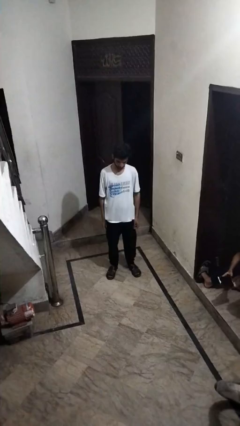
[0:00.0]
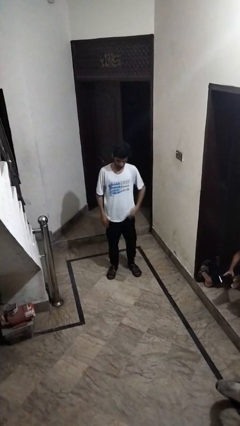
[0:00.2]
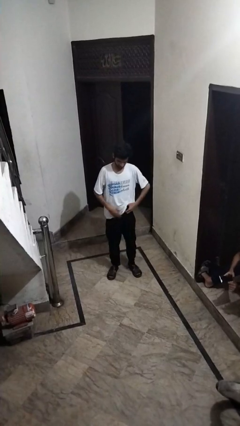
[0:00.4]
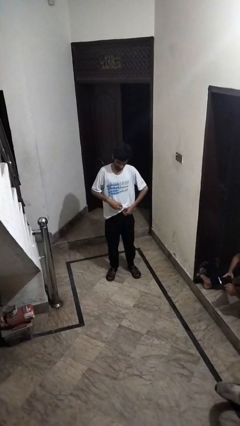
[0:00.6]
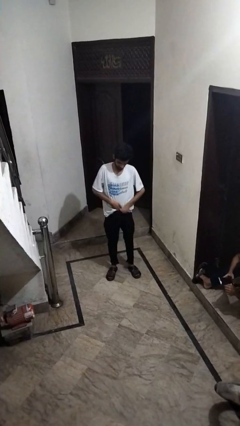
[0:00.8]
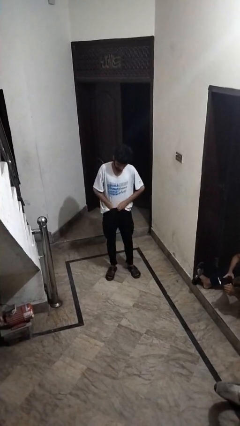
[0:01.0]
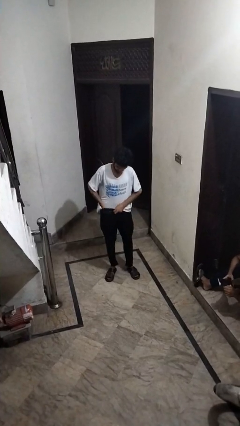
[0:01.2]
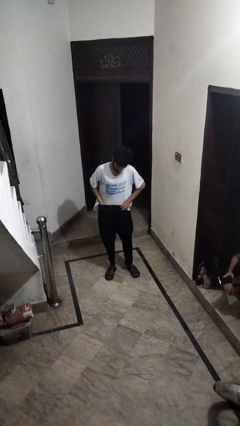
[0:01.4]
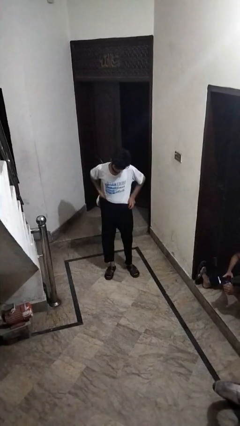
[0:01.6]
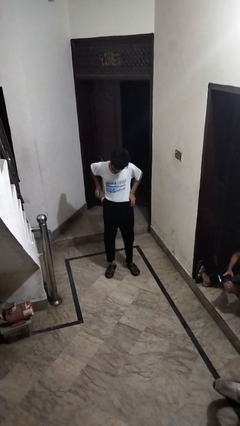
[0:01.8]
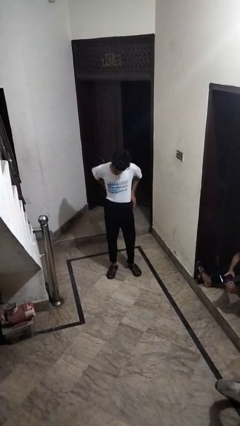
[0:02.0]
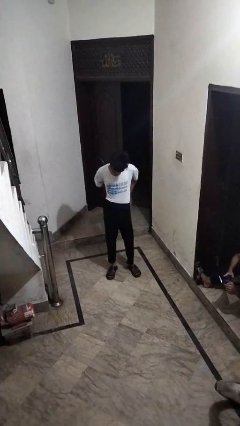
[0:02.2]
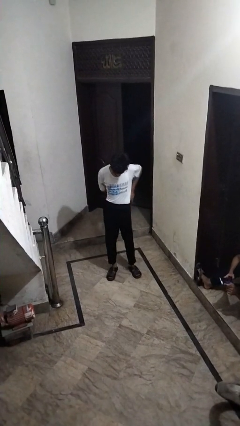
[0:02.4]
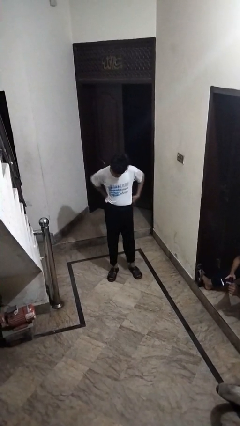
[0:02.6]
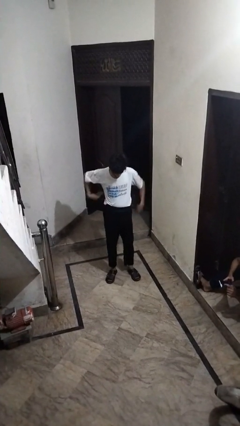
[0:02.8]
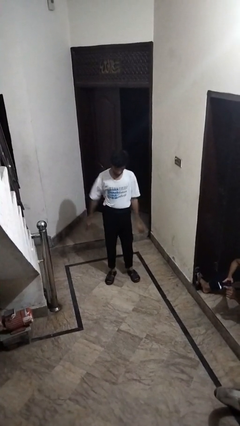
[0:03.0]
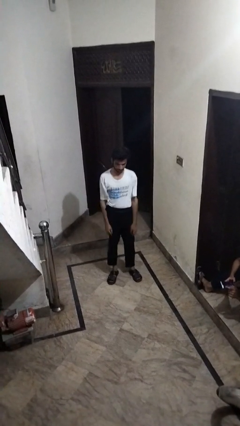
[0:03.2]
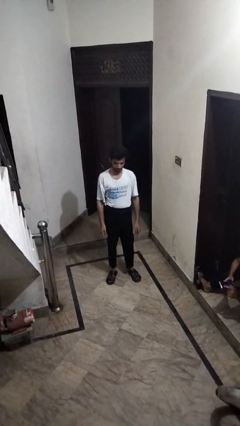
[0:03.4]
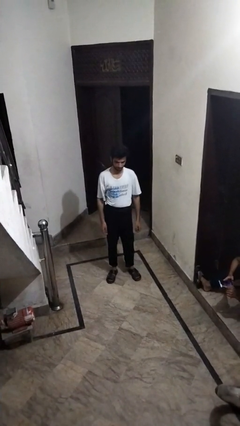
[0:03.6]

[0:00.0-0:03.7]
person tucks in shirt

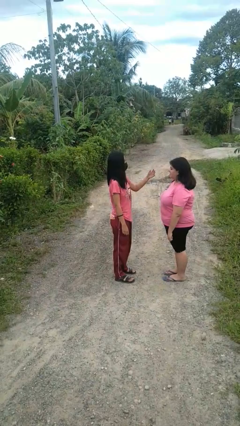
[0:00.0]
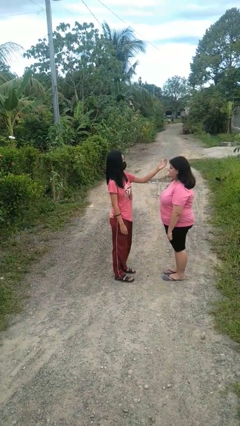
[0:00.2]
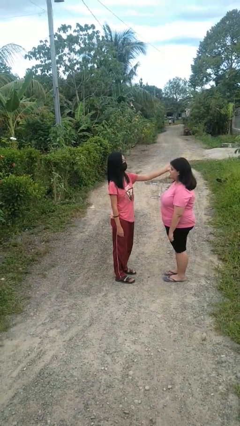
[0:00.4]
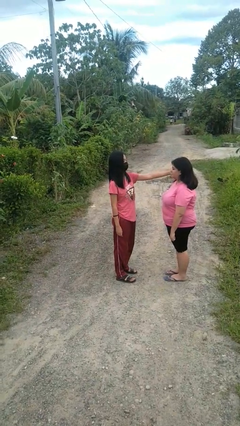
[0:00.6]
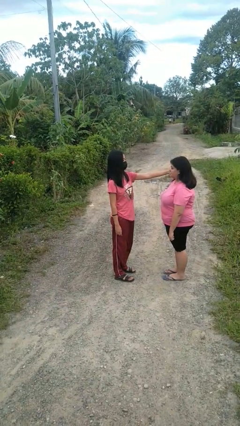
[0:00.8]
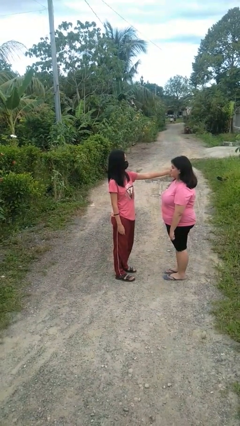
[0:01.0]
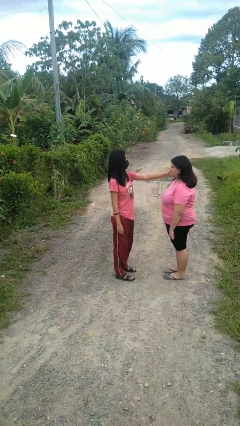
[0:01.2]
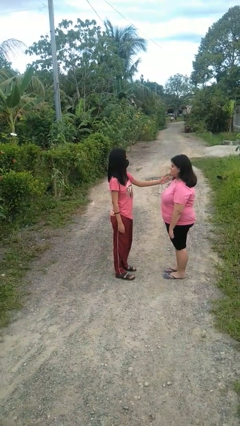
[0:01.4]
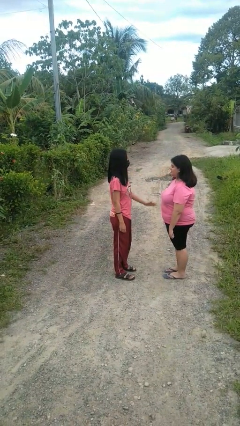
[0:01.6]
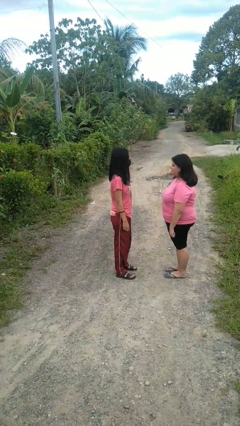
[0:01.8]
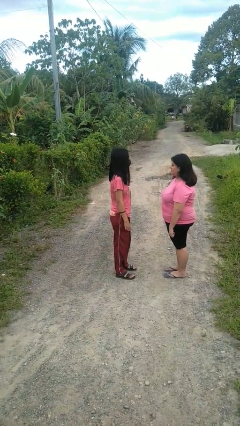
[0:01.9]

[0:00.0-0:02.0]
person touches face of person

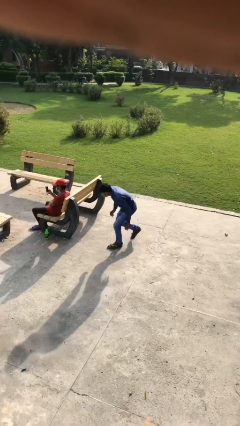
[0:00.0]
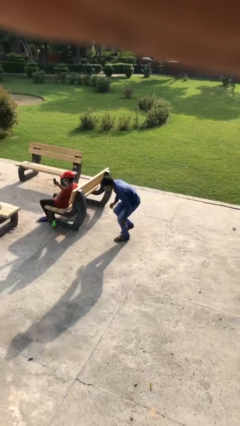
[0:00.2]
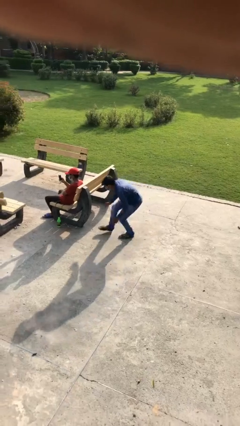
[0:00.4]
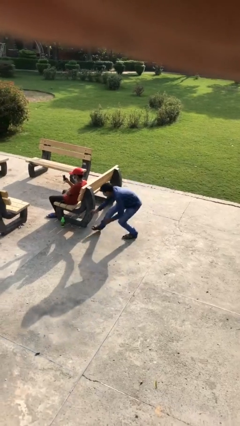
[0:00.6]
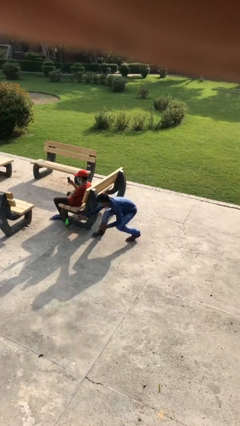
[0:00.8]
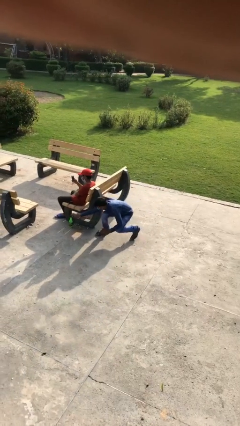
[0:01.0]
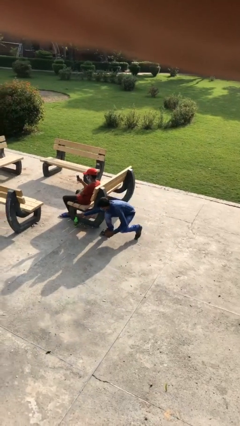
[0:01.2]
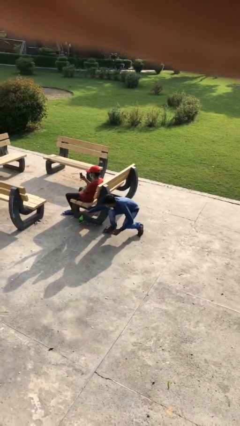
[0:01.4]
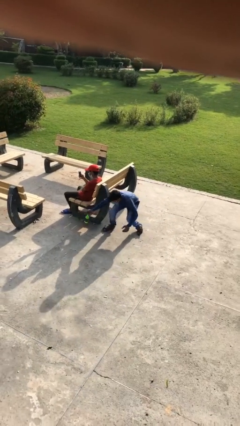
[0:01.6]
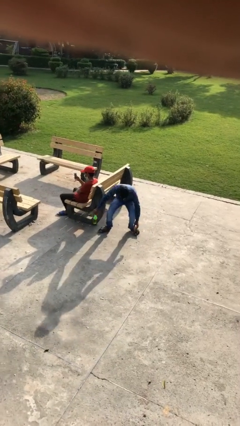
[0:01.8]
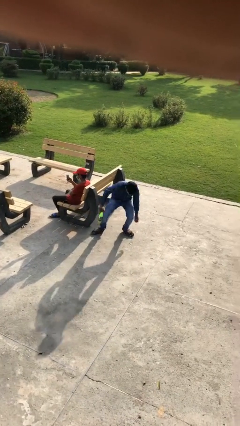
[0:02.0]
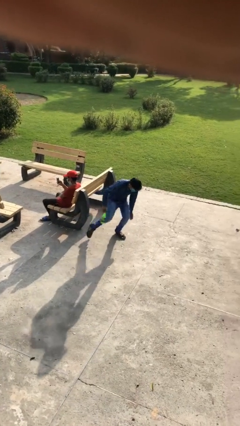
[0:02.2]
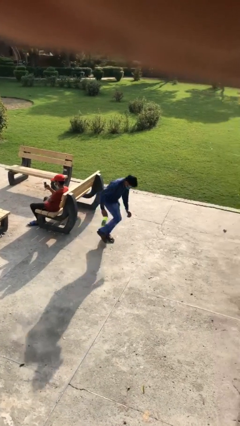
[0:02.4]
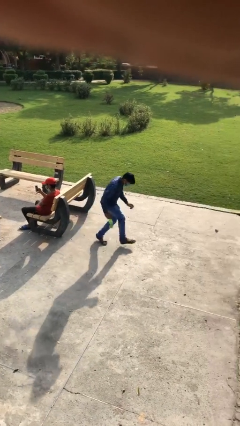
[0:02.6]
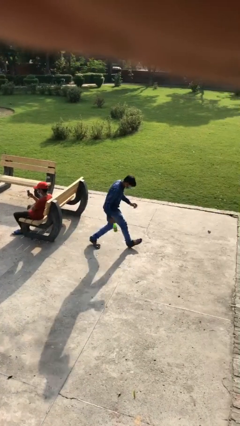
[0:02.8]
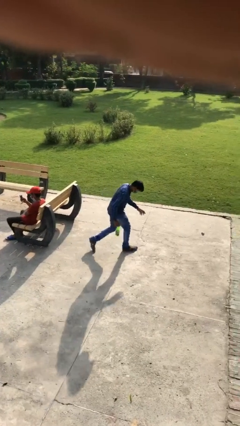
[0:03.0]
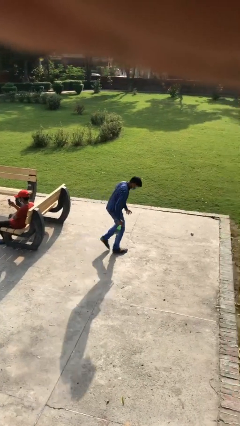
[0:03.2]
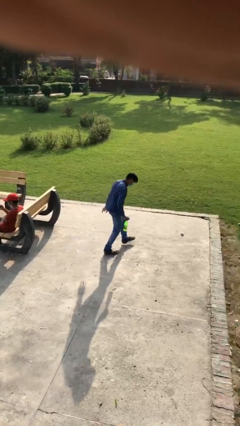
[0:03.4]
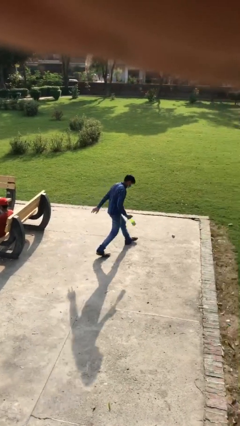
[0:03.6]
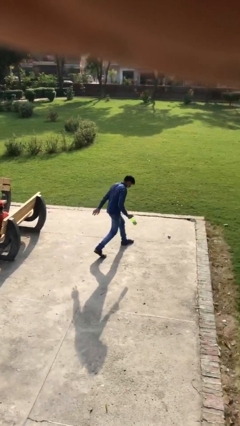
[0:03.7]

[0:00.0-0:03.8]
person steals object from person

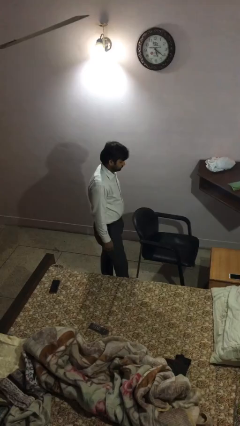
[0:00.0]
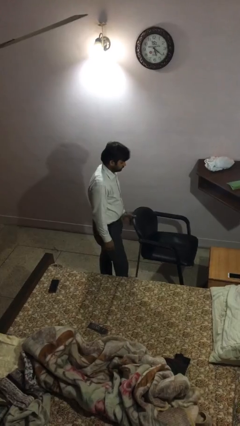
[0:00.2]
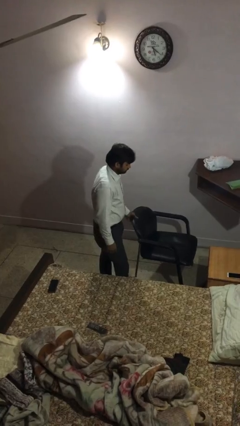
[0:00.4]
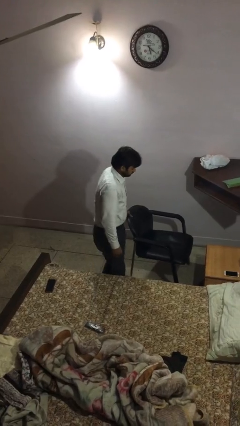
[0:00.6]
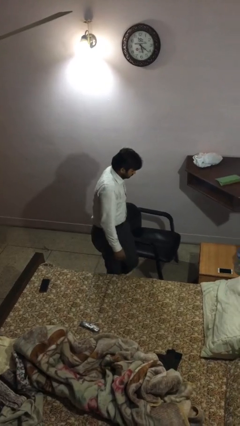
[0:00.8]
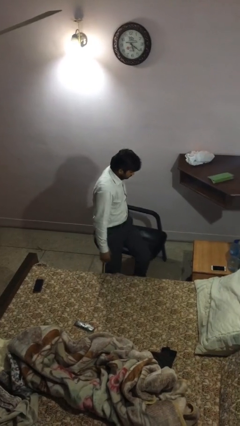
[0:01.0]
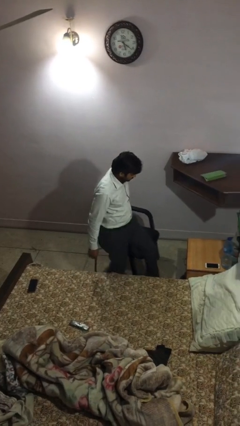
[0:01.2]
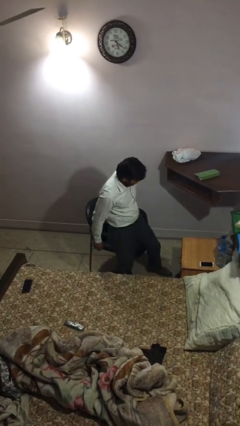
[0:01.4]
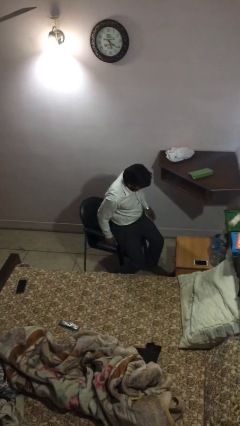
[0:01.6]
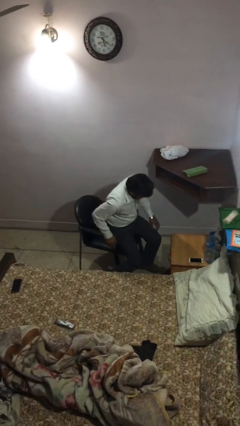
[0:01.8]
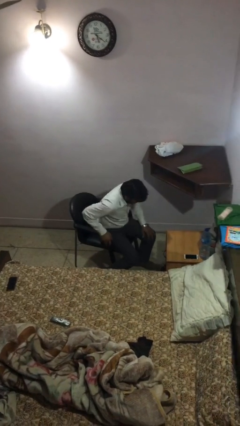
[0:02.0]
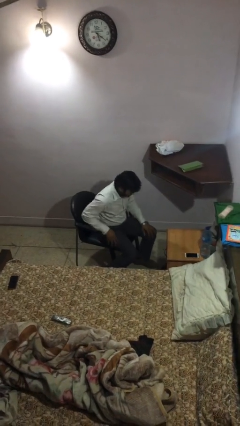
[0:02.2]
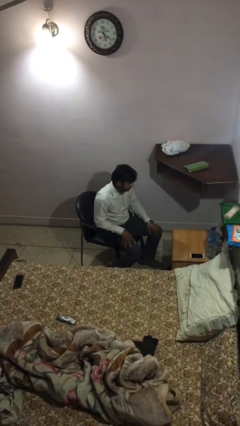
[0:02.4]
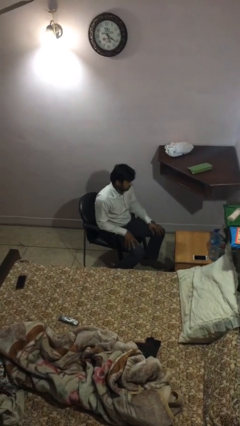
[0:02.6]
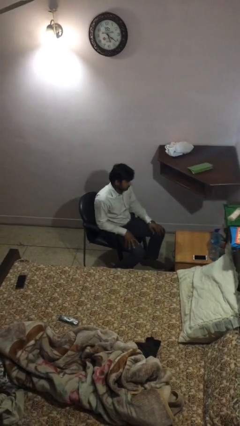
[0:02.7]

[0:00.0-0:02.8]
person sits down

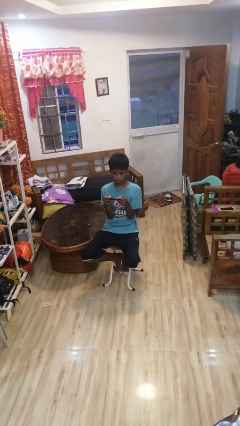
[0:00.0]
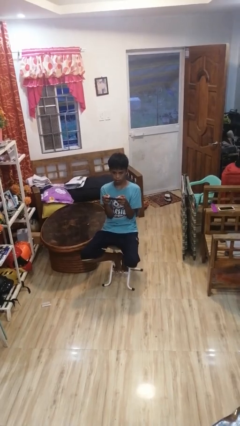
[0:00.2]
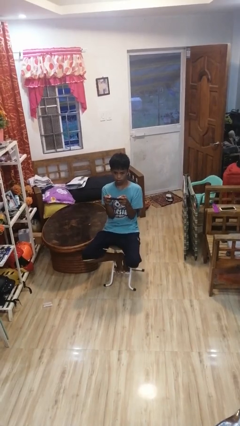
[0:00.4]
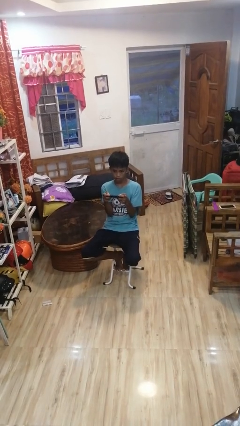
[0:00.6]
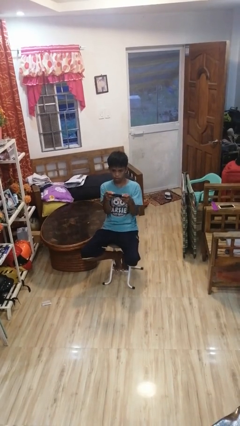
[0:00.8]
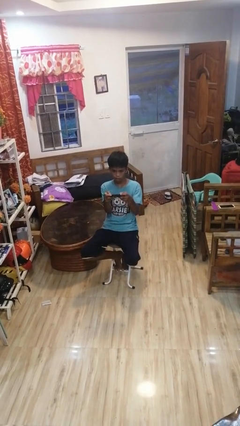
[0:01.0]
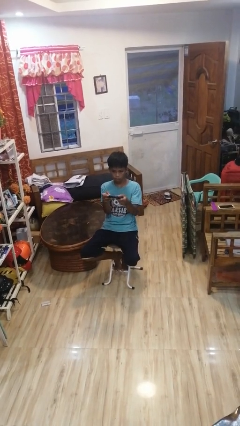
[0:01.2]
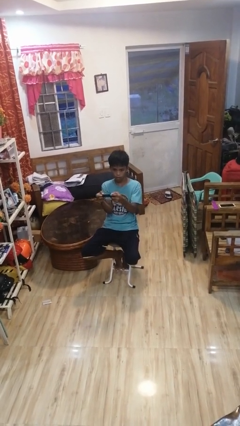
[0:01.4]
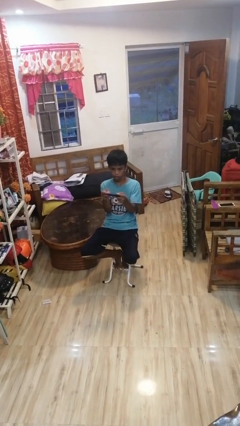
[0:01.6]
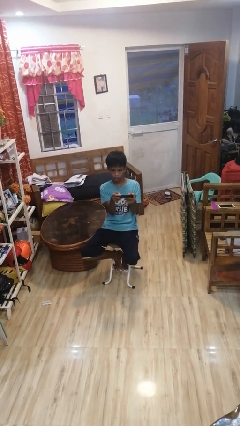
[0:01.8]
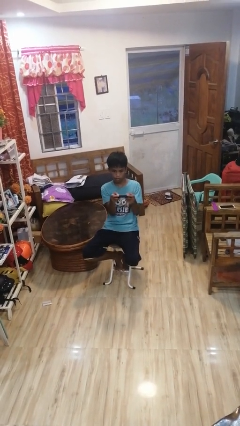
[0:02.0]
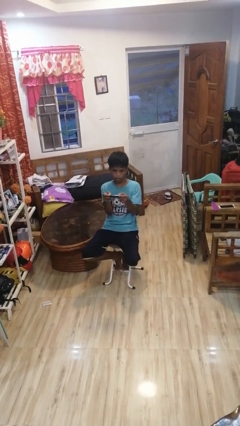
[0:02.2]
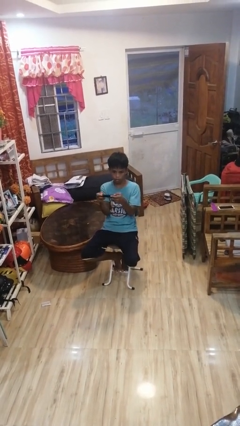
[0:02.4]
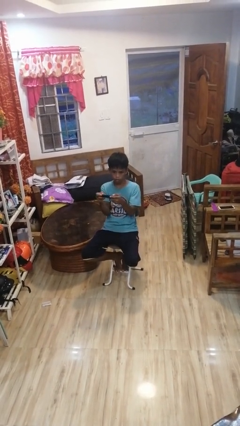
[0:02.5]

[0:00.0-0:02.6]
person interacts with handheld game

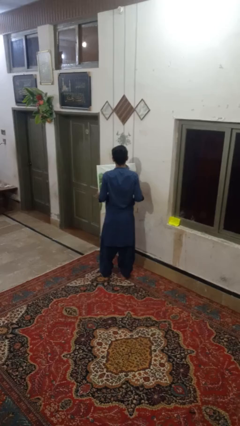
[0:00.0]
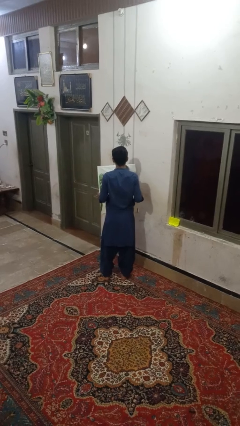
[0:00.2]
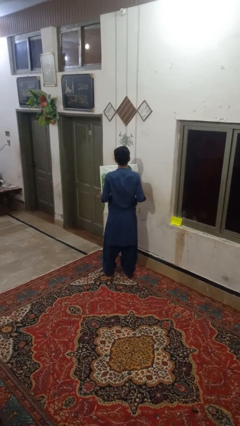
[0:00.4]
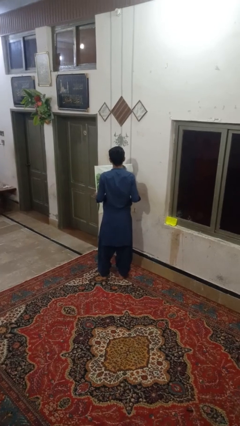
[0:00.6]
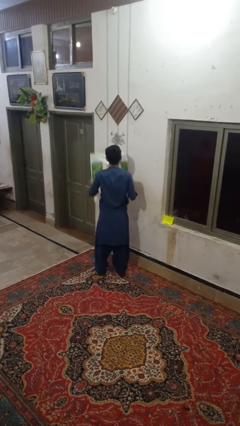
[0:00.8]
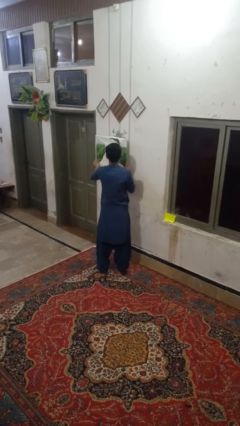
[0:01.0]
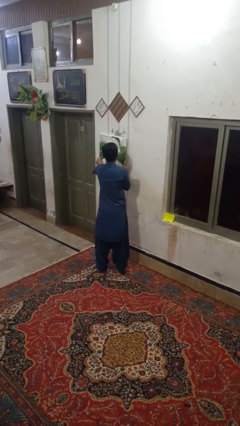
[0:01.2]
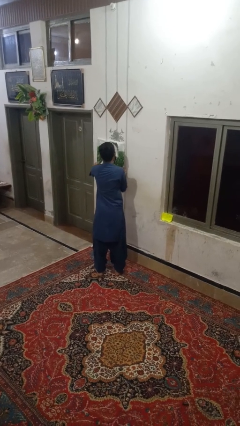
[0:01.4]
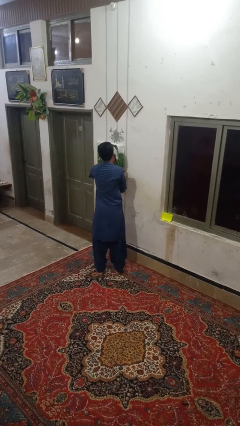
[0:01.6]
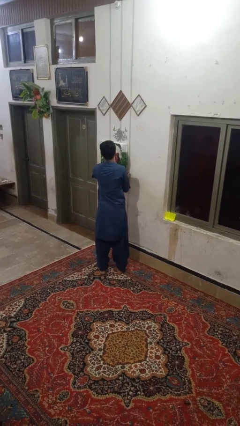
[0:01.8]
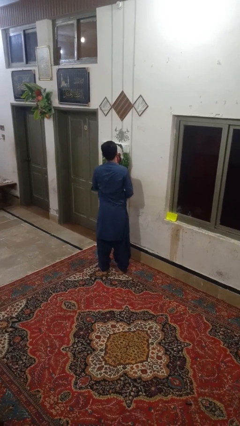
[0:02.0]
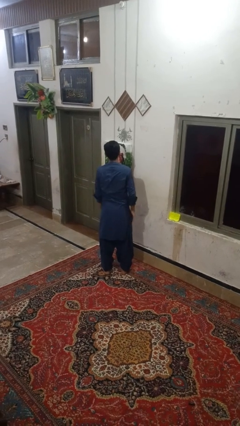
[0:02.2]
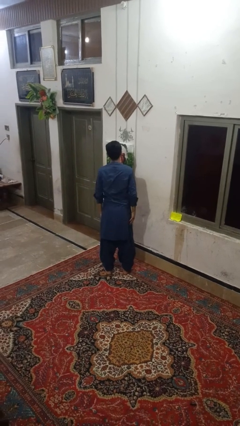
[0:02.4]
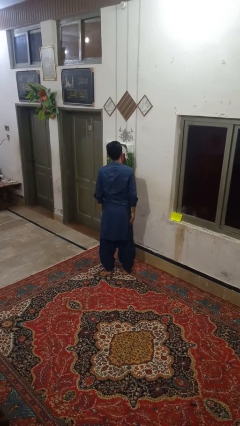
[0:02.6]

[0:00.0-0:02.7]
person puts up picture frame

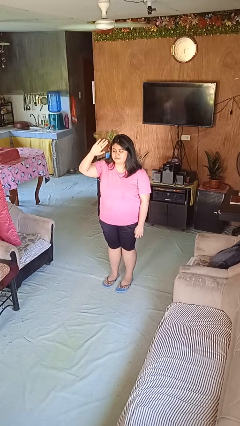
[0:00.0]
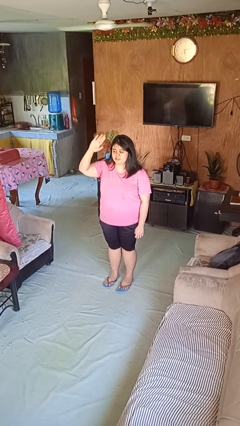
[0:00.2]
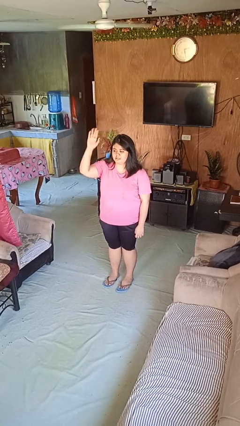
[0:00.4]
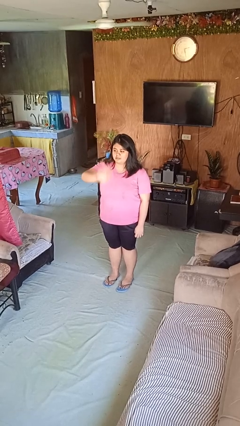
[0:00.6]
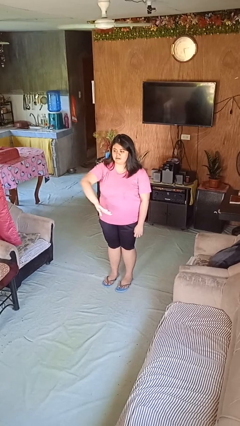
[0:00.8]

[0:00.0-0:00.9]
person gestures swipe down
